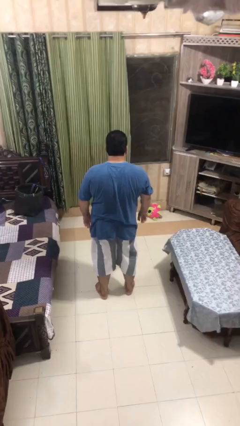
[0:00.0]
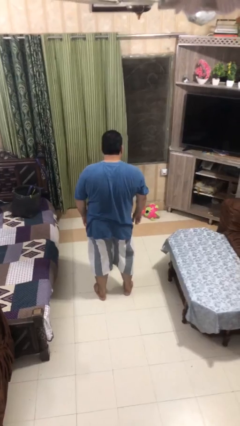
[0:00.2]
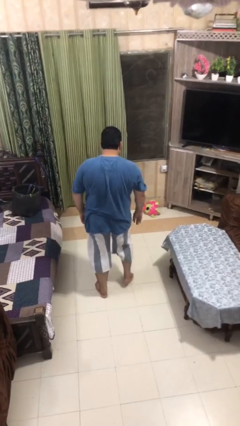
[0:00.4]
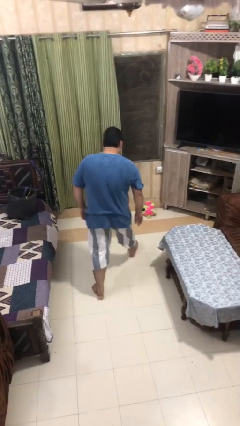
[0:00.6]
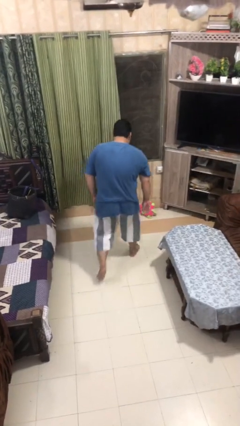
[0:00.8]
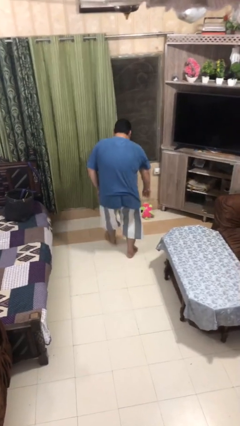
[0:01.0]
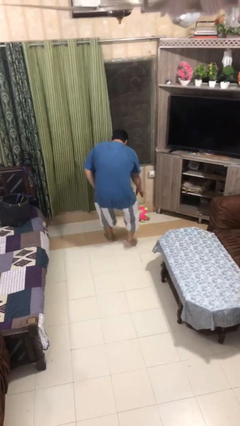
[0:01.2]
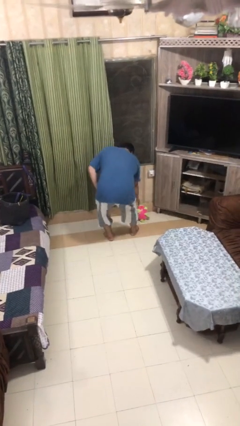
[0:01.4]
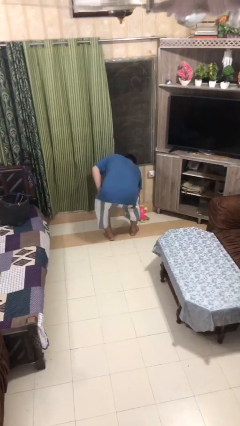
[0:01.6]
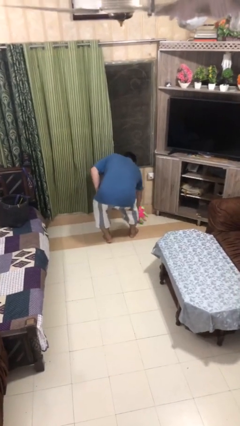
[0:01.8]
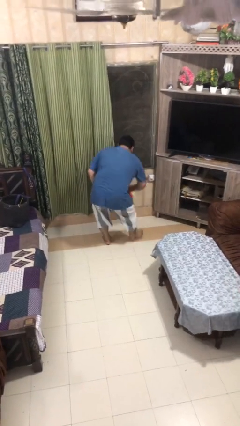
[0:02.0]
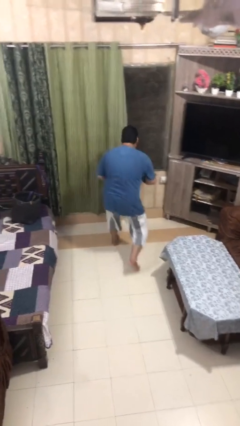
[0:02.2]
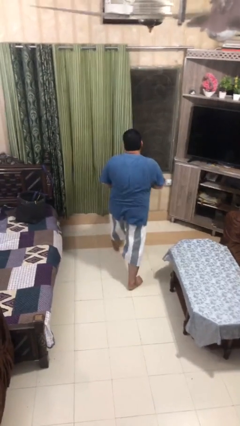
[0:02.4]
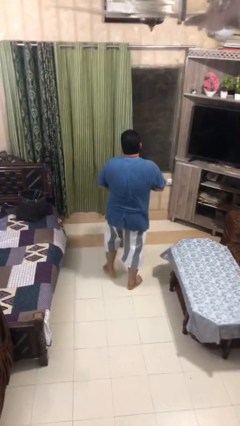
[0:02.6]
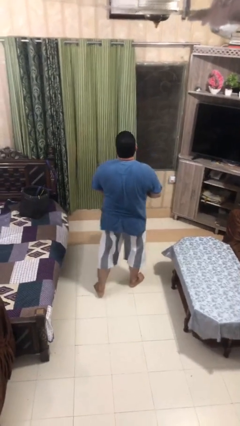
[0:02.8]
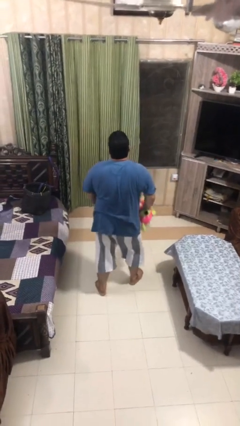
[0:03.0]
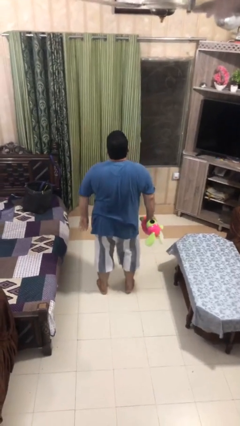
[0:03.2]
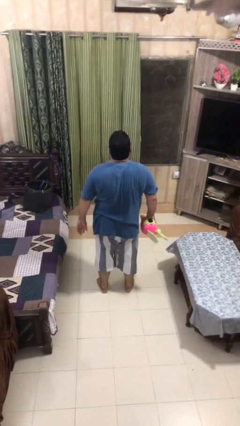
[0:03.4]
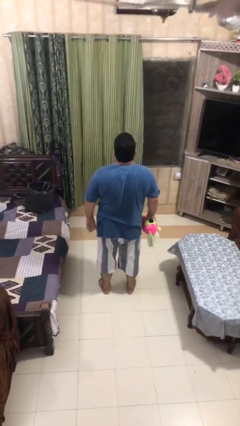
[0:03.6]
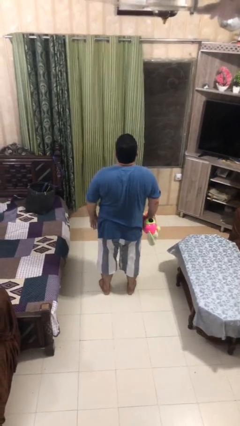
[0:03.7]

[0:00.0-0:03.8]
person picks up object from floor

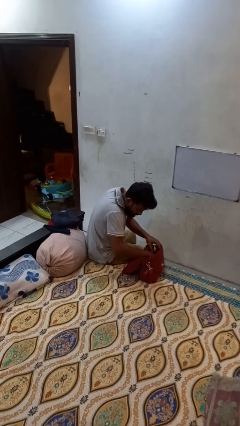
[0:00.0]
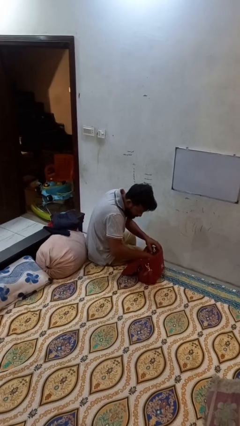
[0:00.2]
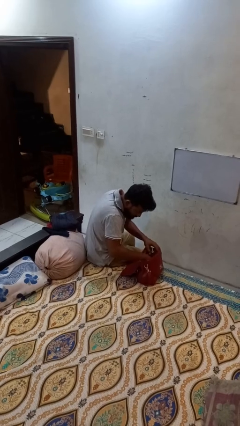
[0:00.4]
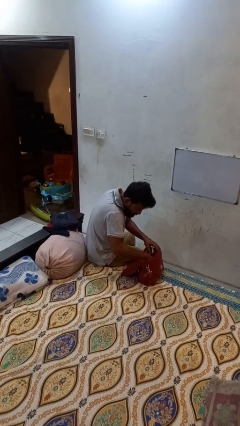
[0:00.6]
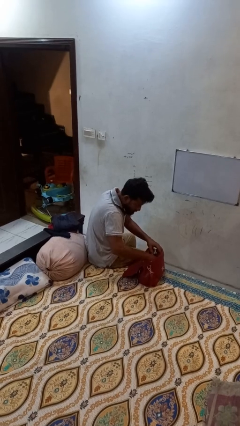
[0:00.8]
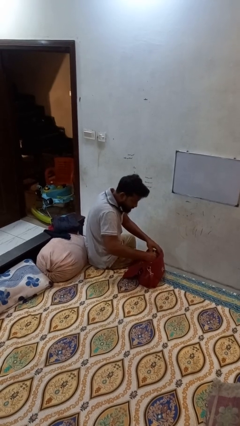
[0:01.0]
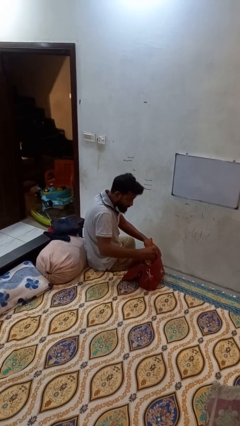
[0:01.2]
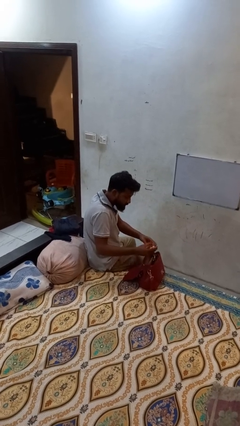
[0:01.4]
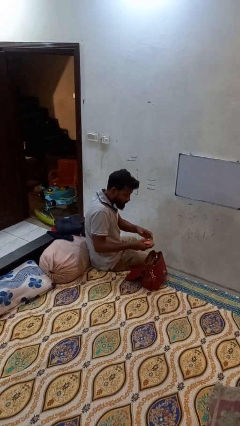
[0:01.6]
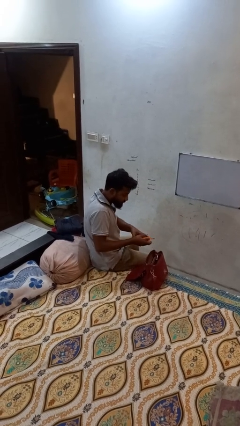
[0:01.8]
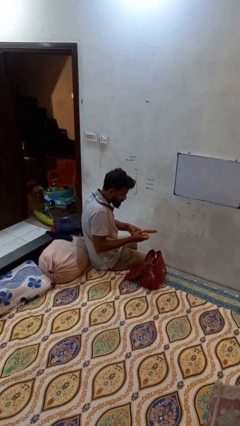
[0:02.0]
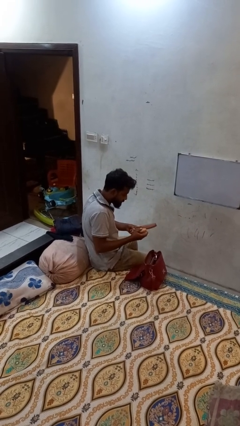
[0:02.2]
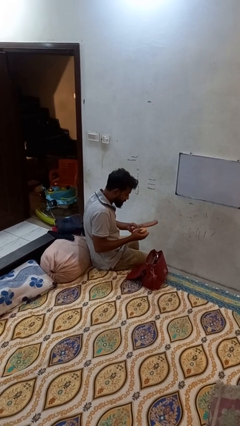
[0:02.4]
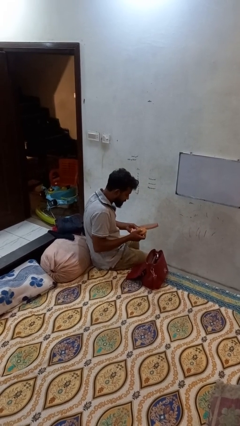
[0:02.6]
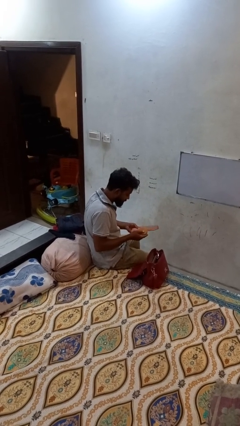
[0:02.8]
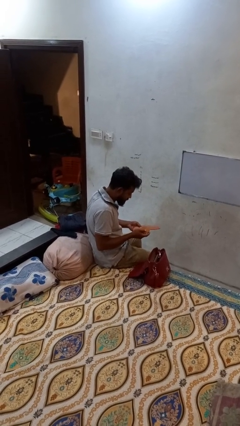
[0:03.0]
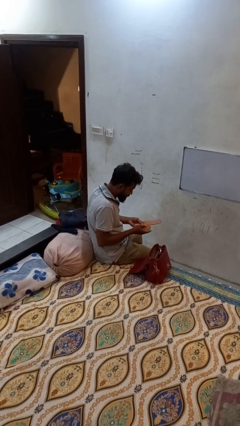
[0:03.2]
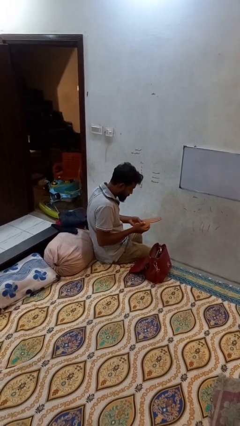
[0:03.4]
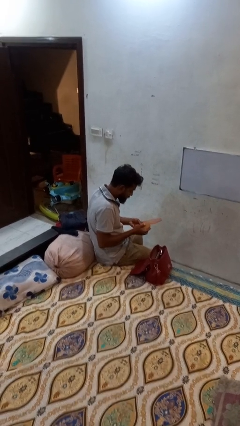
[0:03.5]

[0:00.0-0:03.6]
person takes object from purse

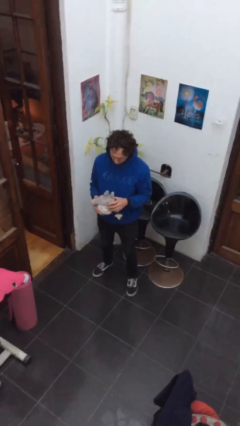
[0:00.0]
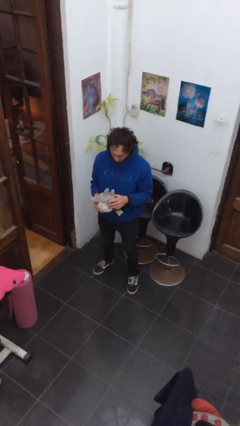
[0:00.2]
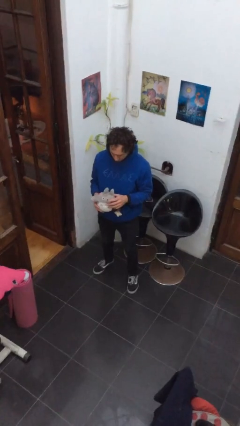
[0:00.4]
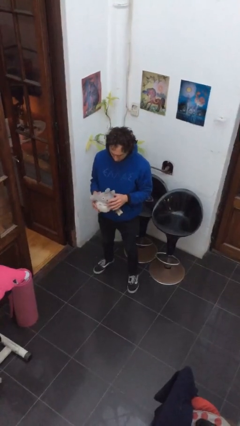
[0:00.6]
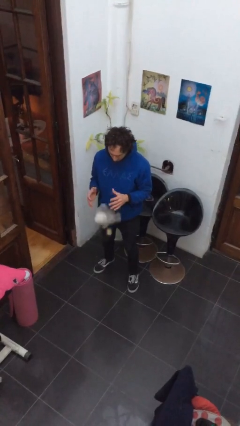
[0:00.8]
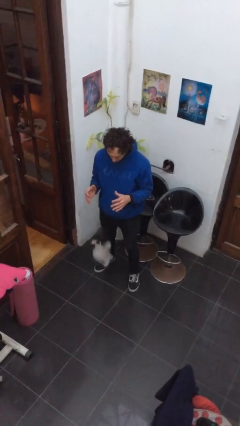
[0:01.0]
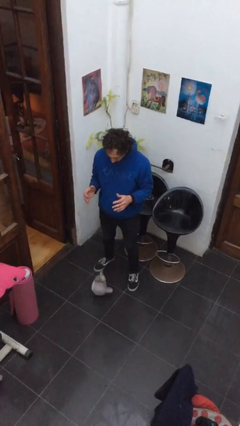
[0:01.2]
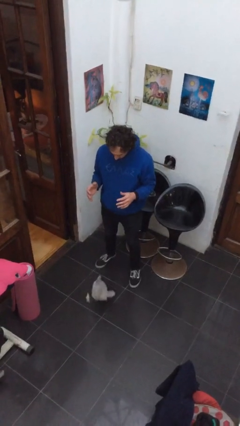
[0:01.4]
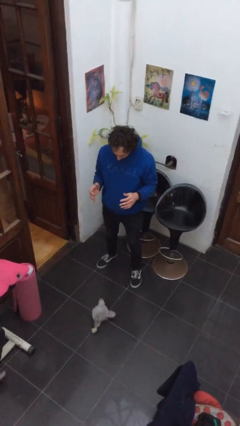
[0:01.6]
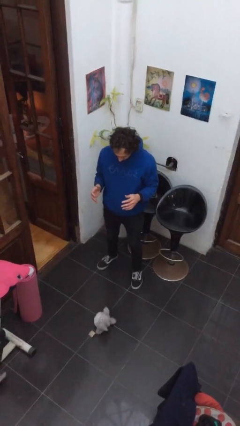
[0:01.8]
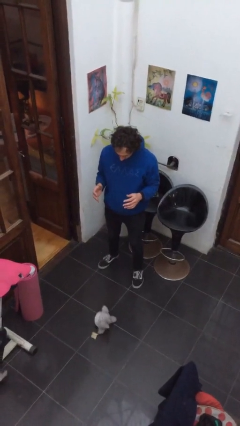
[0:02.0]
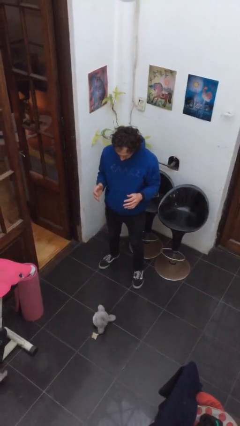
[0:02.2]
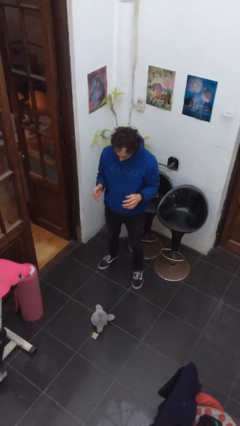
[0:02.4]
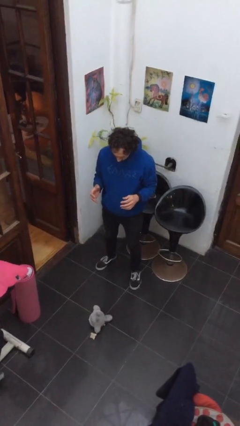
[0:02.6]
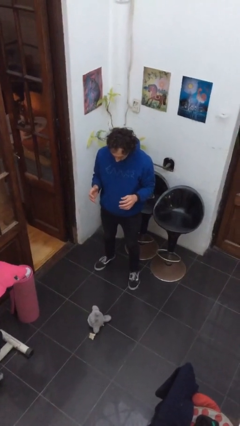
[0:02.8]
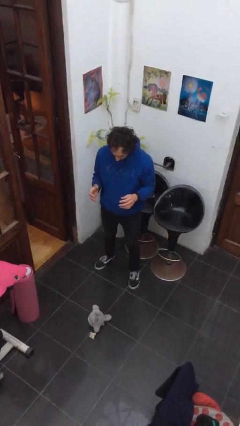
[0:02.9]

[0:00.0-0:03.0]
person drops object

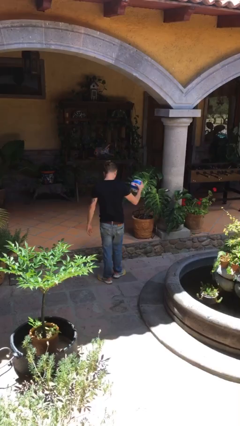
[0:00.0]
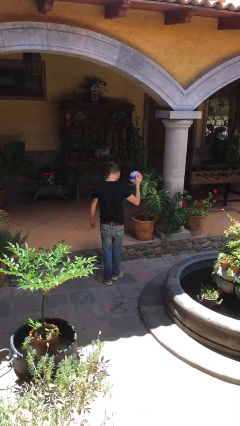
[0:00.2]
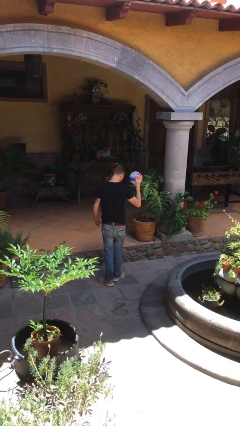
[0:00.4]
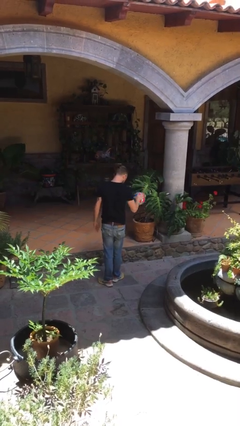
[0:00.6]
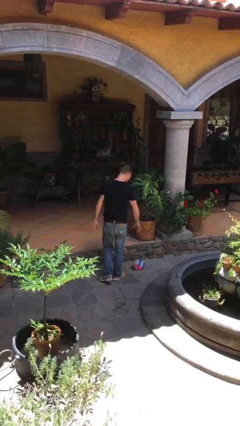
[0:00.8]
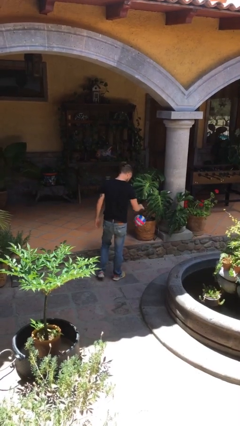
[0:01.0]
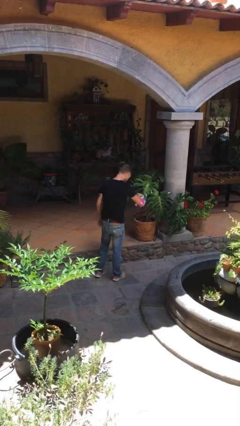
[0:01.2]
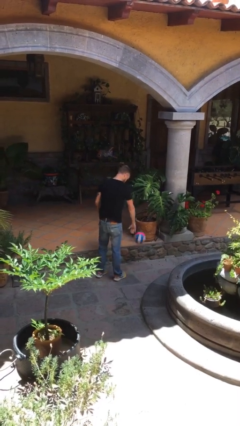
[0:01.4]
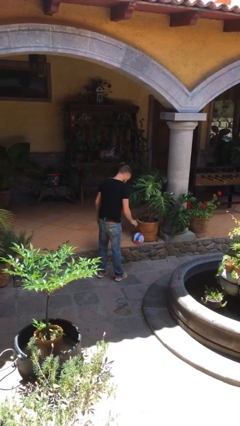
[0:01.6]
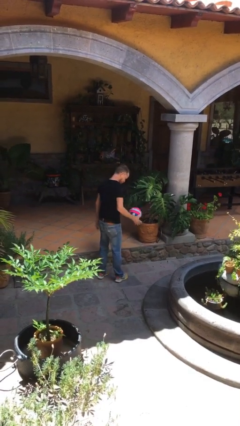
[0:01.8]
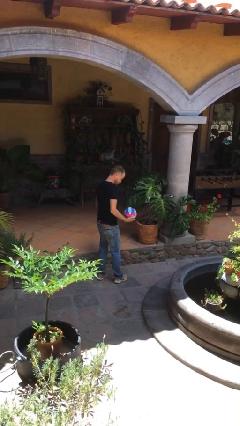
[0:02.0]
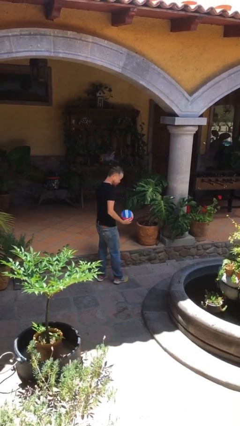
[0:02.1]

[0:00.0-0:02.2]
person bounces ball on floor

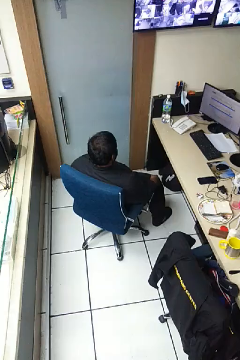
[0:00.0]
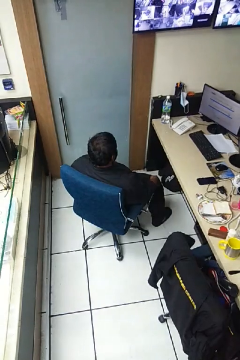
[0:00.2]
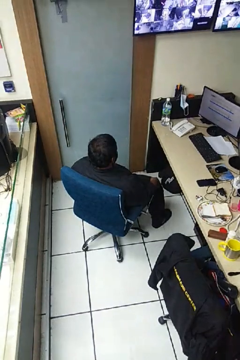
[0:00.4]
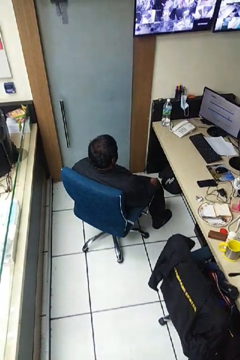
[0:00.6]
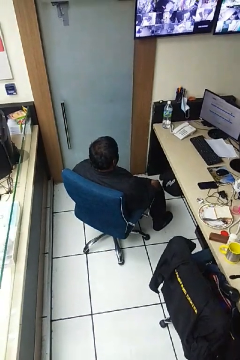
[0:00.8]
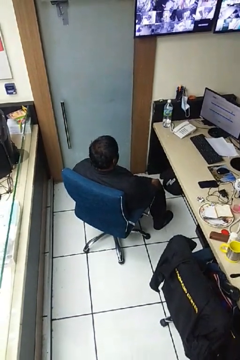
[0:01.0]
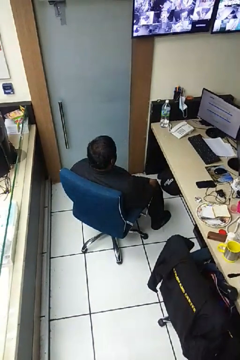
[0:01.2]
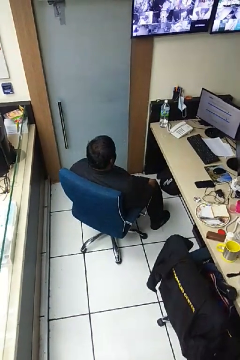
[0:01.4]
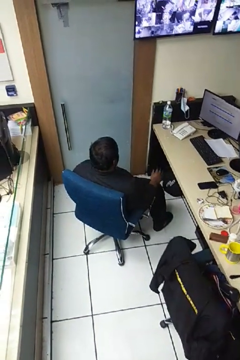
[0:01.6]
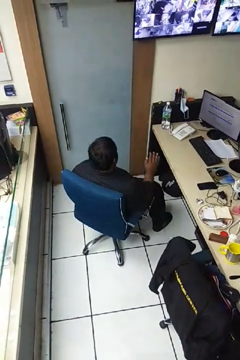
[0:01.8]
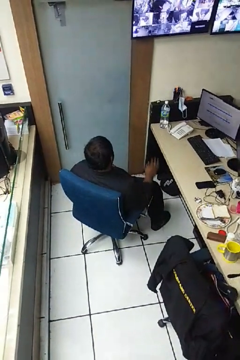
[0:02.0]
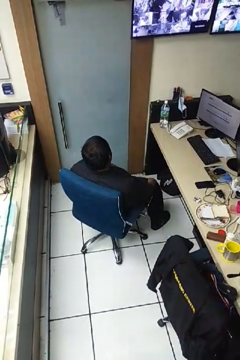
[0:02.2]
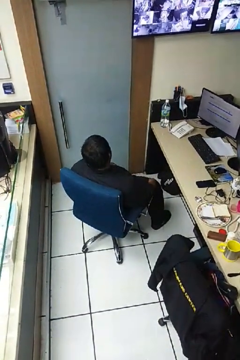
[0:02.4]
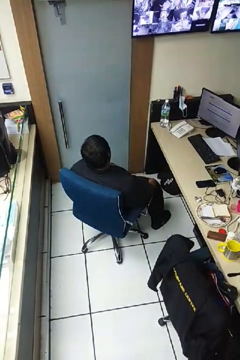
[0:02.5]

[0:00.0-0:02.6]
person slaps hands on thighs

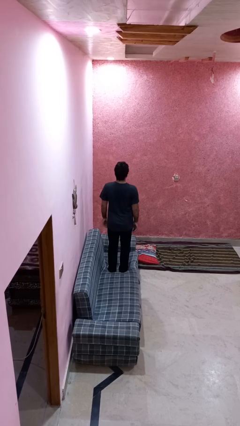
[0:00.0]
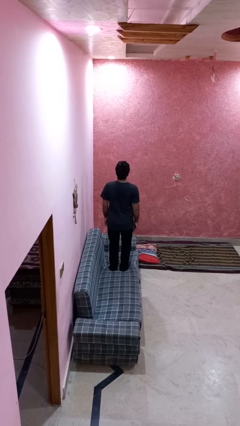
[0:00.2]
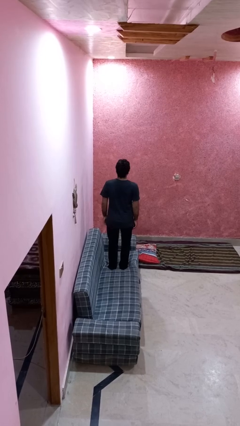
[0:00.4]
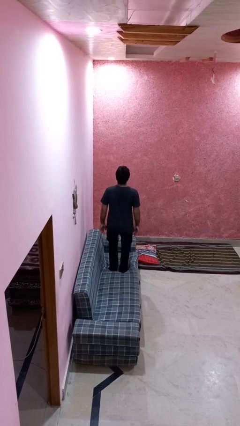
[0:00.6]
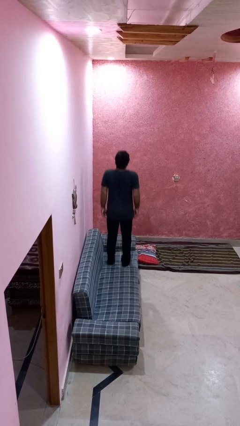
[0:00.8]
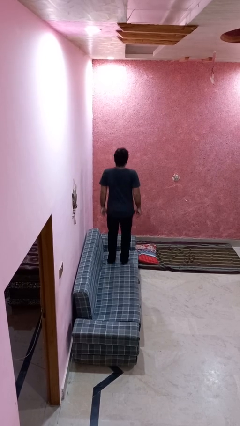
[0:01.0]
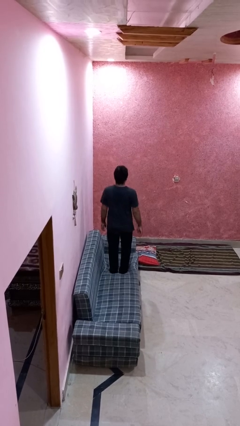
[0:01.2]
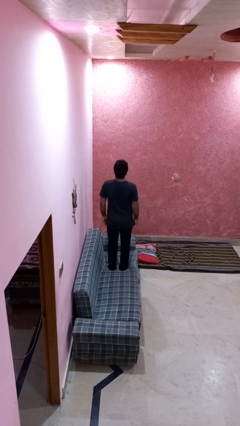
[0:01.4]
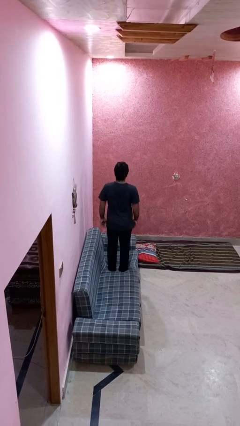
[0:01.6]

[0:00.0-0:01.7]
person jumps on couch

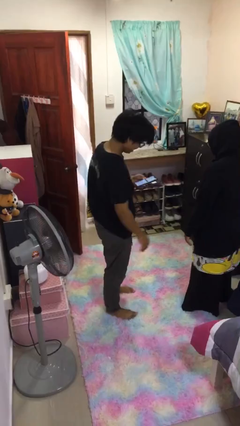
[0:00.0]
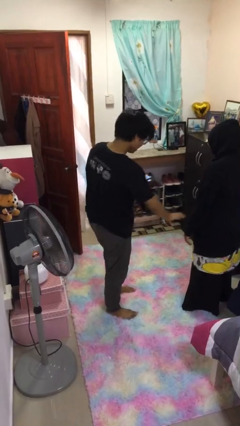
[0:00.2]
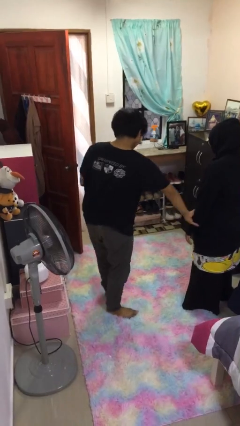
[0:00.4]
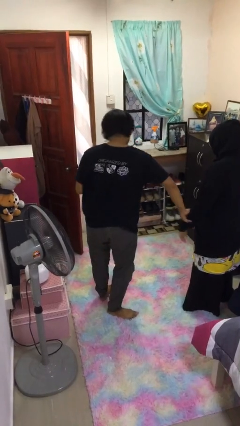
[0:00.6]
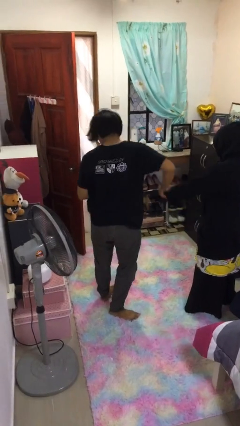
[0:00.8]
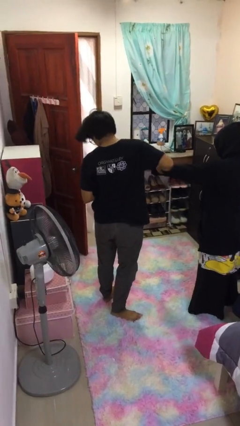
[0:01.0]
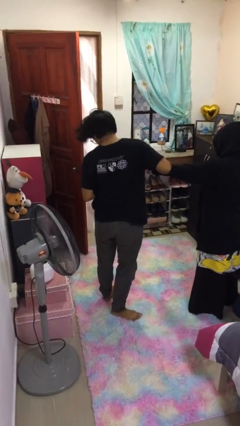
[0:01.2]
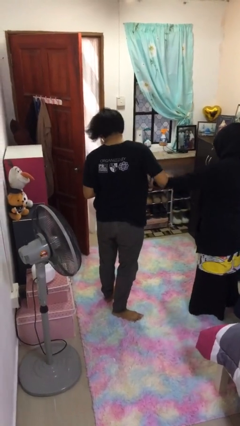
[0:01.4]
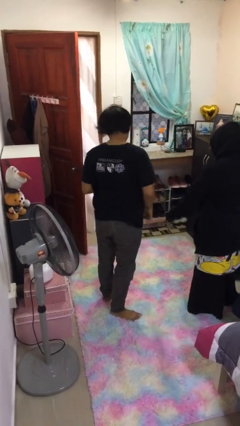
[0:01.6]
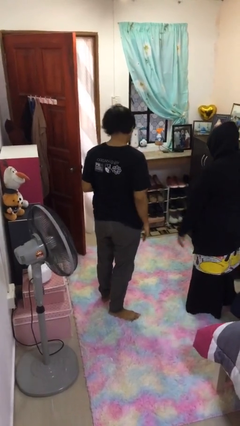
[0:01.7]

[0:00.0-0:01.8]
person grabs person by forearm
